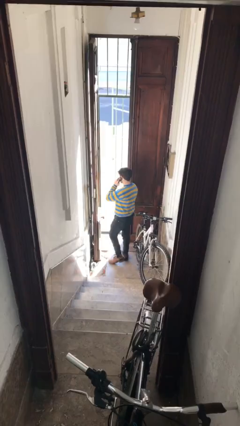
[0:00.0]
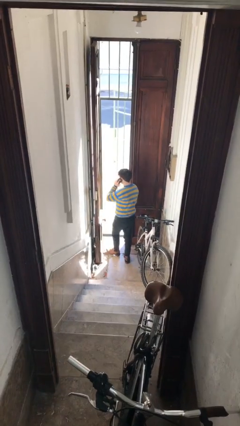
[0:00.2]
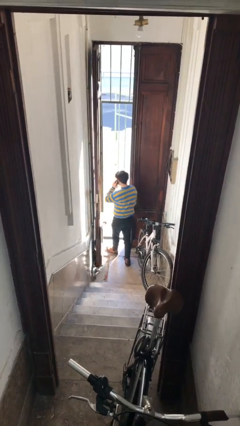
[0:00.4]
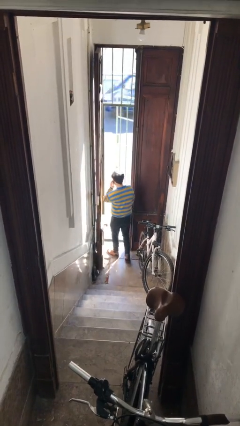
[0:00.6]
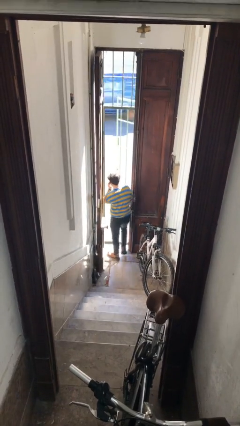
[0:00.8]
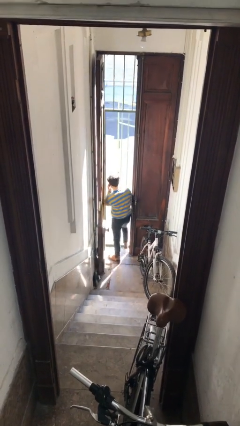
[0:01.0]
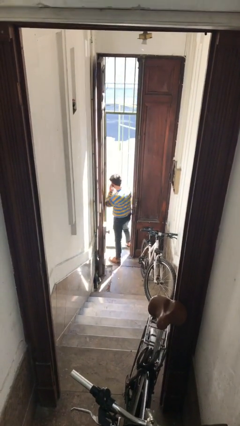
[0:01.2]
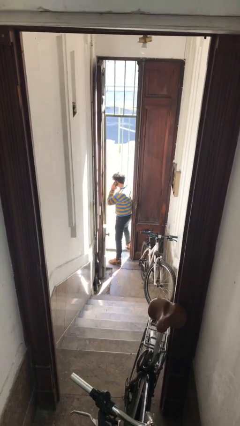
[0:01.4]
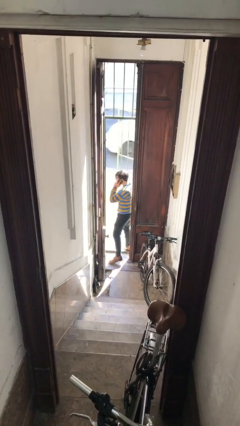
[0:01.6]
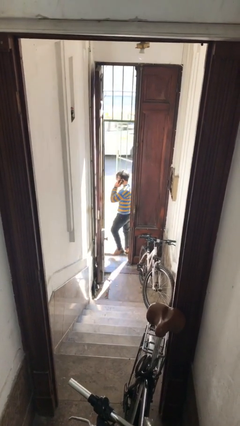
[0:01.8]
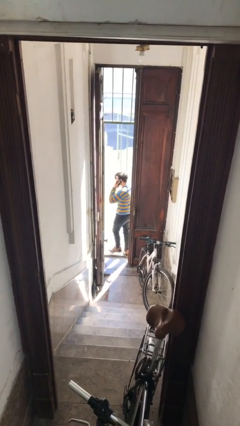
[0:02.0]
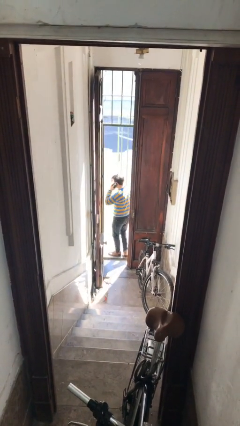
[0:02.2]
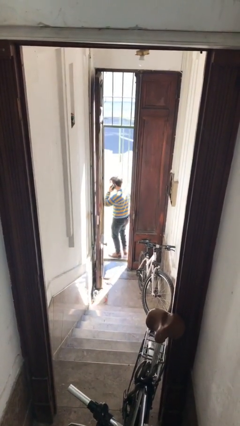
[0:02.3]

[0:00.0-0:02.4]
person exits scene through structure

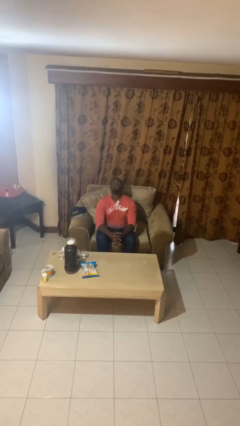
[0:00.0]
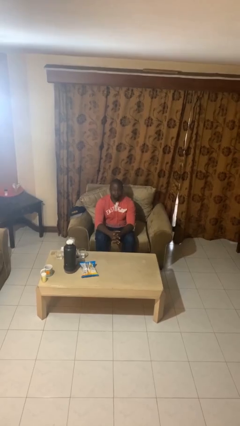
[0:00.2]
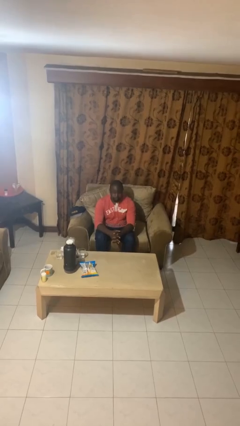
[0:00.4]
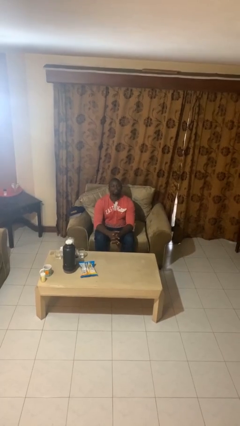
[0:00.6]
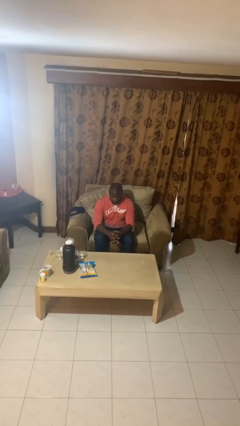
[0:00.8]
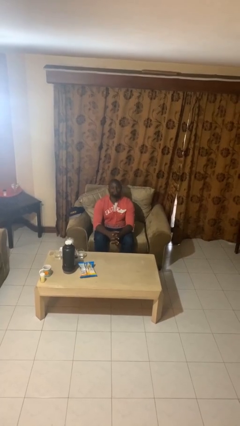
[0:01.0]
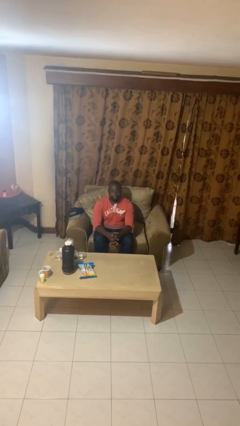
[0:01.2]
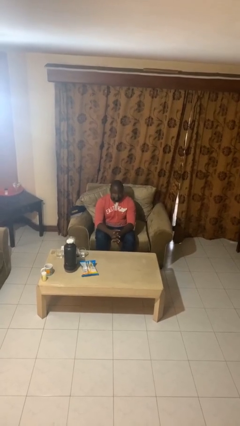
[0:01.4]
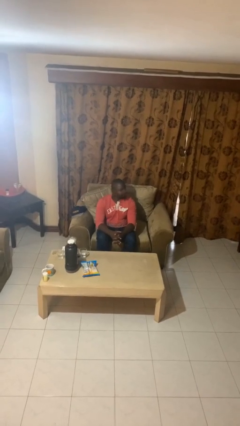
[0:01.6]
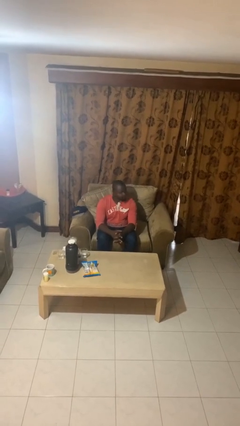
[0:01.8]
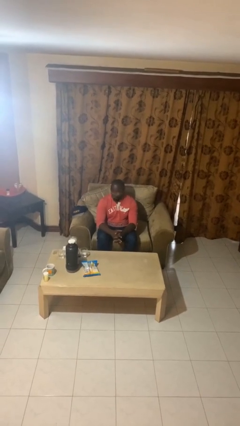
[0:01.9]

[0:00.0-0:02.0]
person nods head

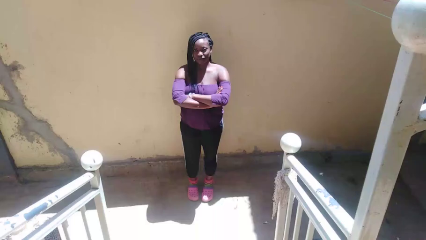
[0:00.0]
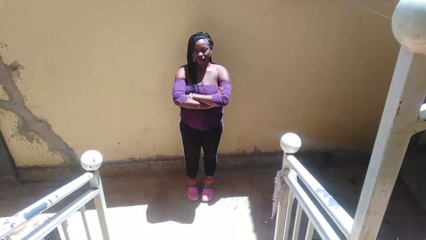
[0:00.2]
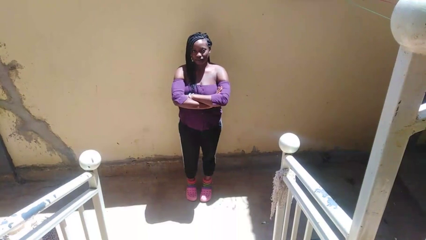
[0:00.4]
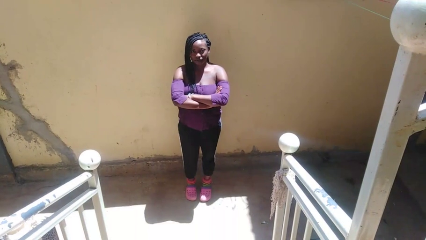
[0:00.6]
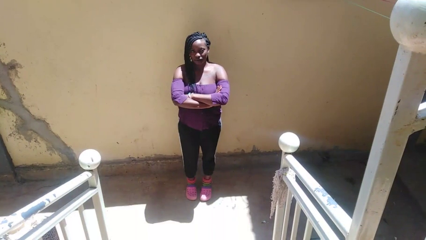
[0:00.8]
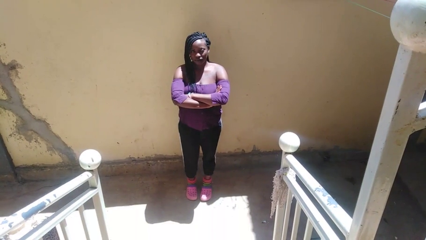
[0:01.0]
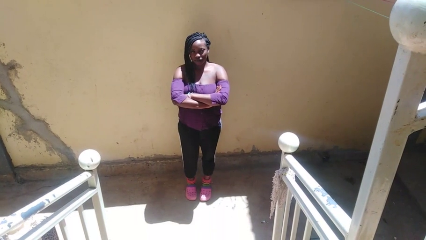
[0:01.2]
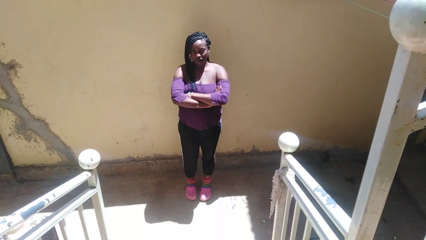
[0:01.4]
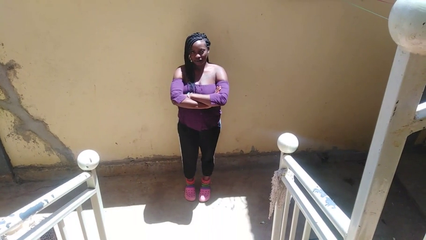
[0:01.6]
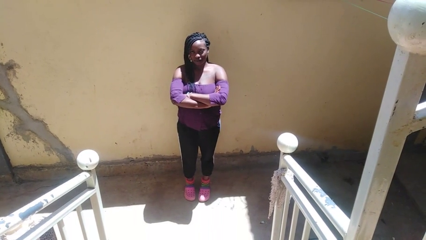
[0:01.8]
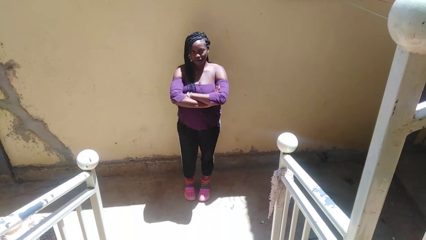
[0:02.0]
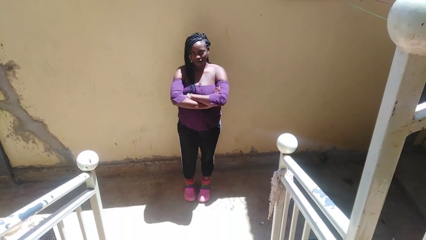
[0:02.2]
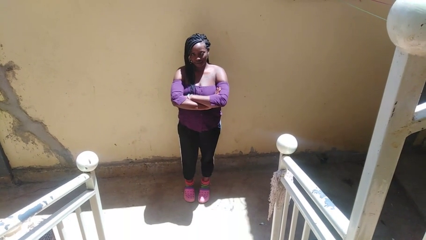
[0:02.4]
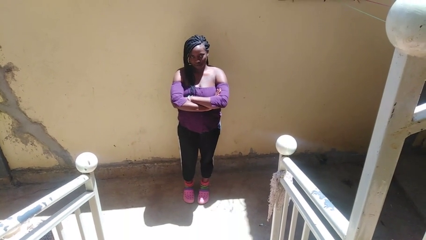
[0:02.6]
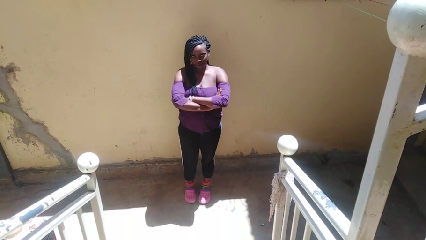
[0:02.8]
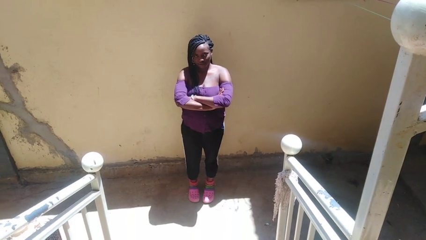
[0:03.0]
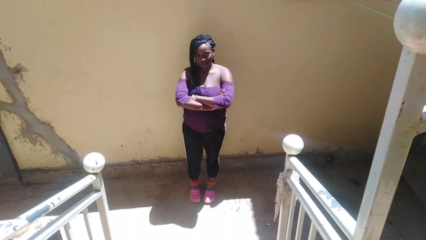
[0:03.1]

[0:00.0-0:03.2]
person crosses arms

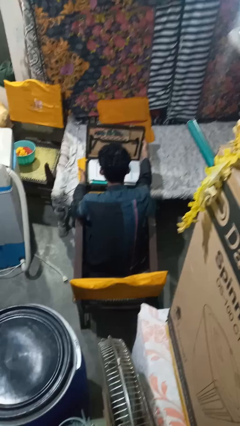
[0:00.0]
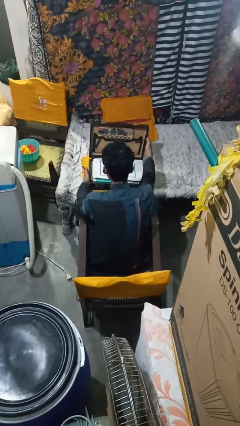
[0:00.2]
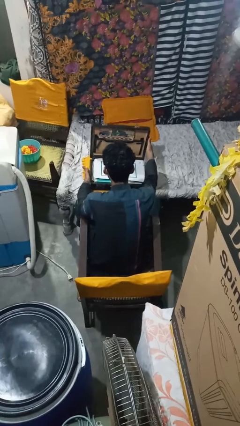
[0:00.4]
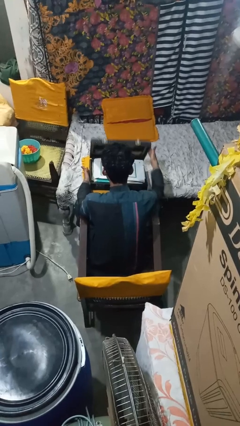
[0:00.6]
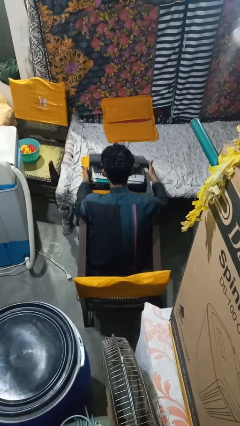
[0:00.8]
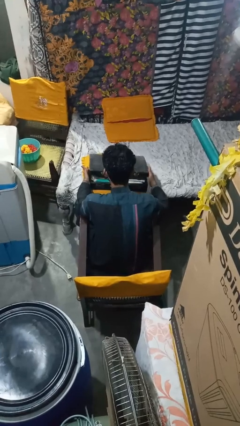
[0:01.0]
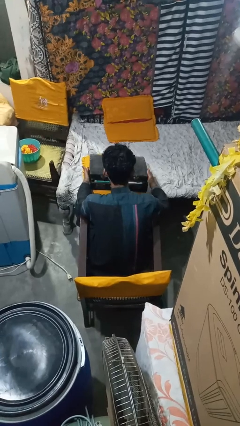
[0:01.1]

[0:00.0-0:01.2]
person closes suitcase

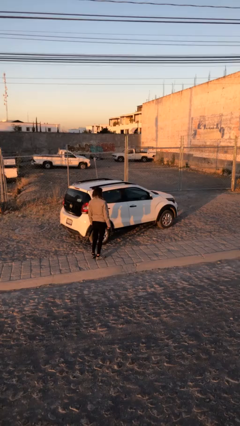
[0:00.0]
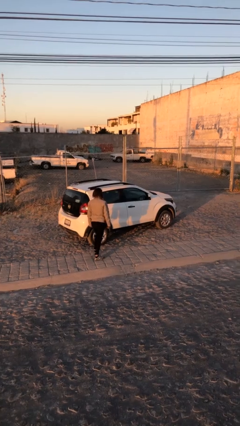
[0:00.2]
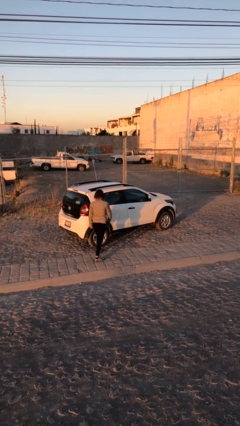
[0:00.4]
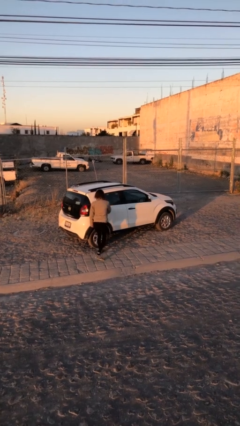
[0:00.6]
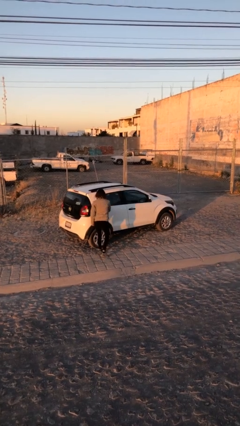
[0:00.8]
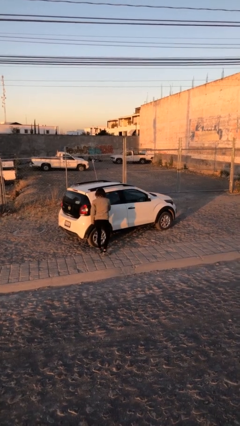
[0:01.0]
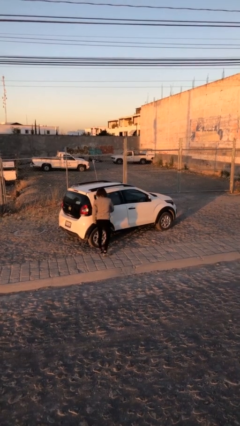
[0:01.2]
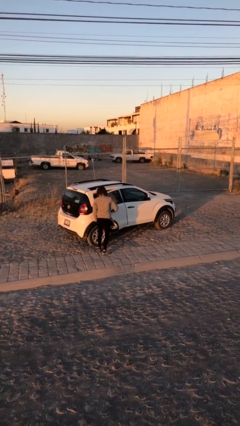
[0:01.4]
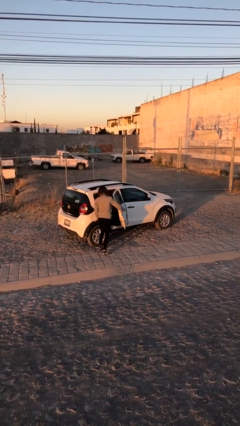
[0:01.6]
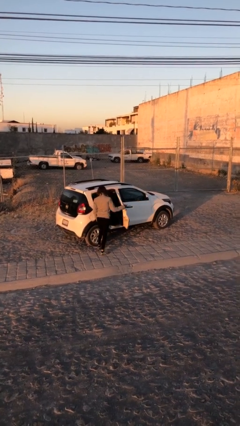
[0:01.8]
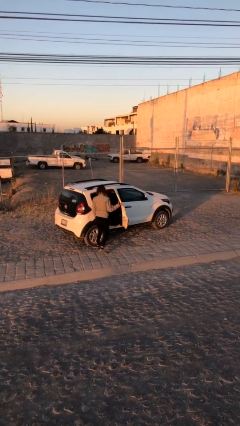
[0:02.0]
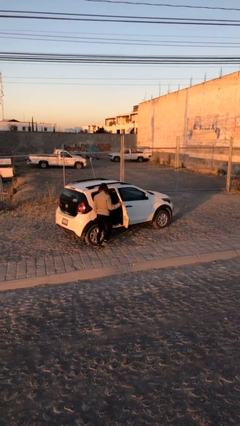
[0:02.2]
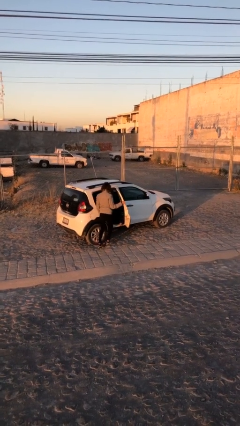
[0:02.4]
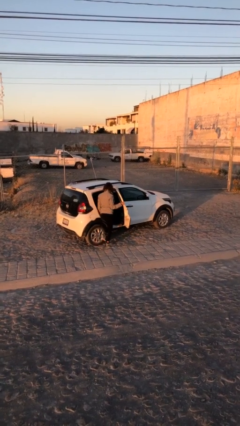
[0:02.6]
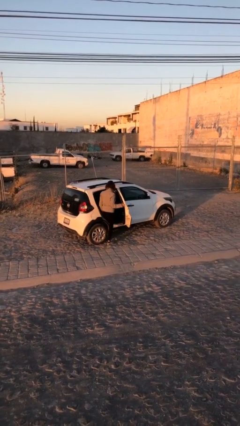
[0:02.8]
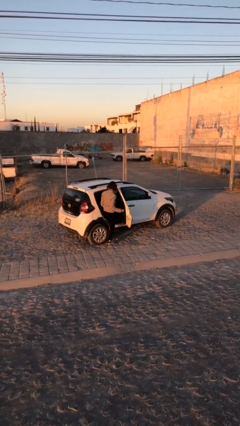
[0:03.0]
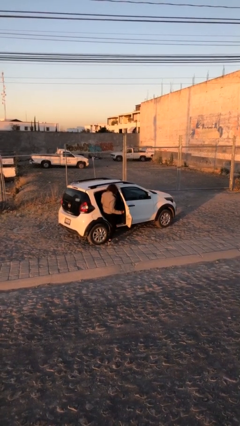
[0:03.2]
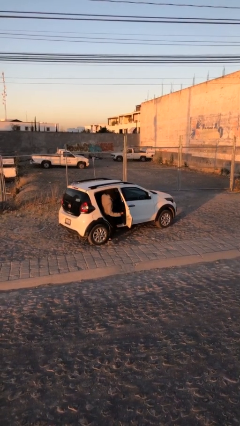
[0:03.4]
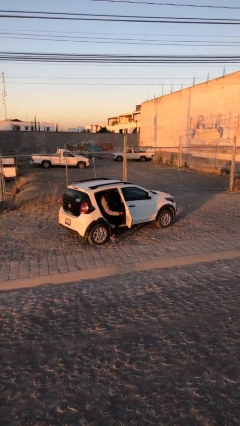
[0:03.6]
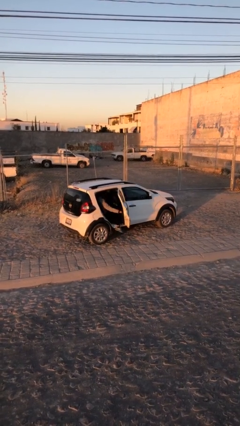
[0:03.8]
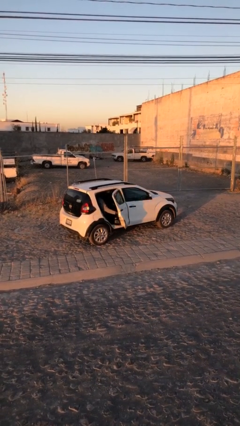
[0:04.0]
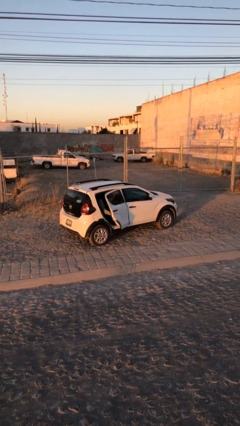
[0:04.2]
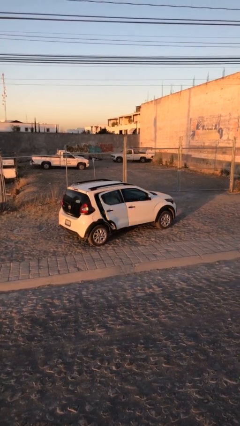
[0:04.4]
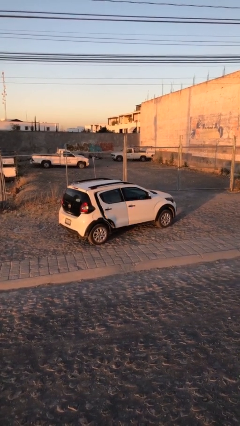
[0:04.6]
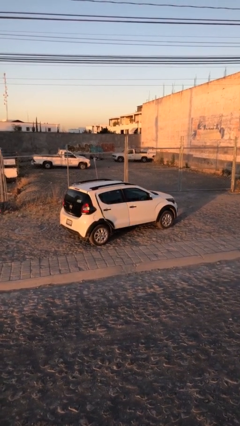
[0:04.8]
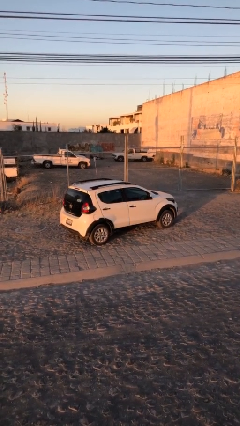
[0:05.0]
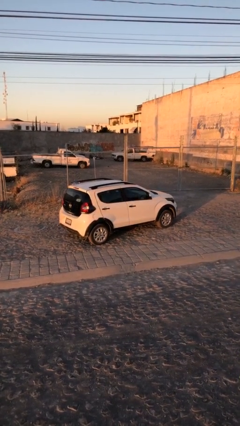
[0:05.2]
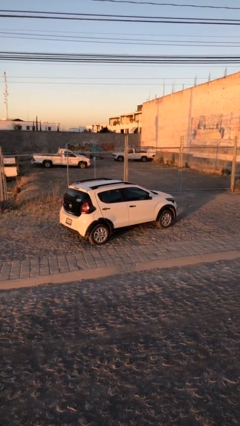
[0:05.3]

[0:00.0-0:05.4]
car picks up person

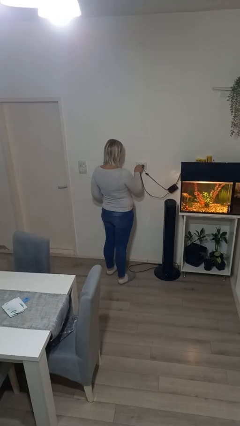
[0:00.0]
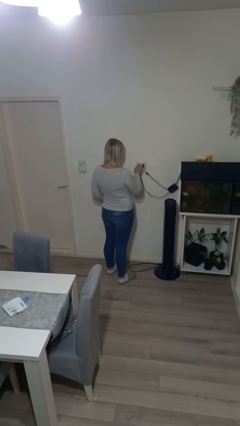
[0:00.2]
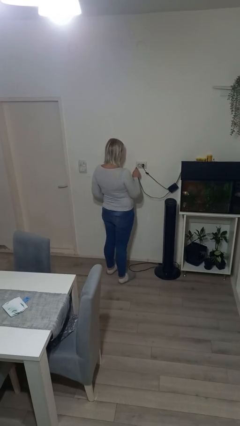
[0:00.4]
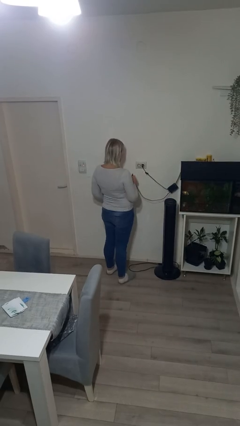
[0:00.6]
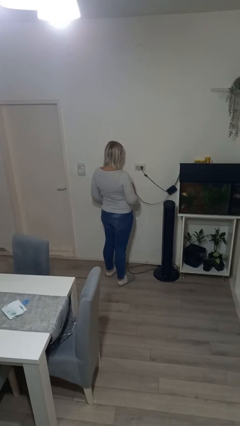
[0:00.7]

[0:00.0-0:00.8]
person unplugs from electrical socket

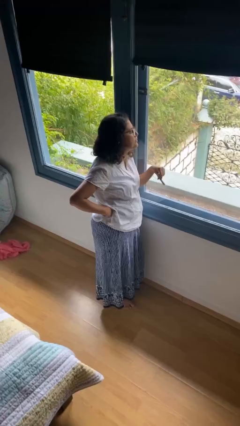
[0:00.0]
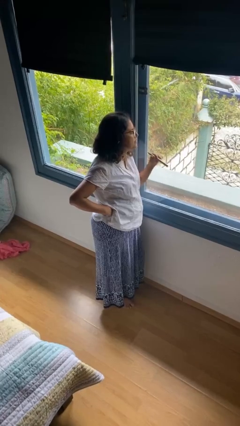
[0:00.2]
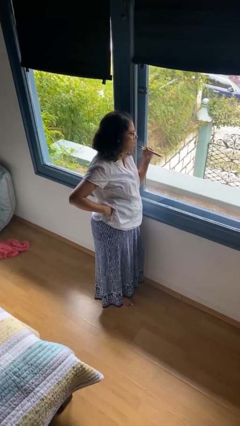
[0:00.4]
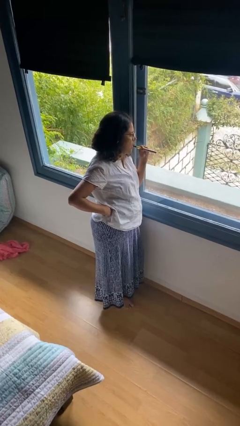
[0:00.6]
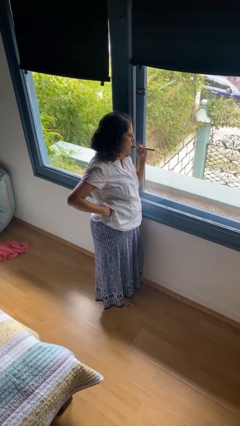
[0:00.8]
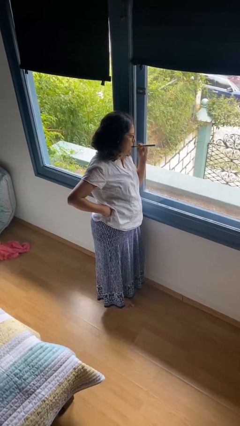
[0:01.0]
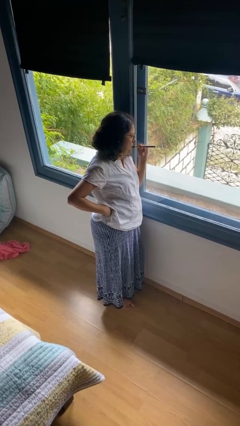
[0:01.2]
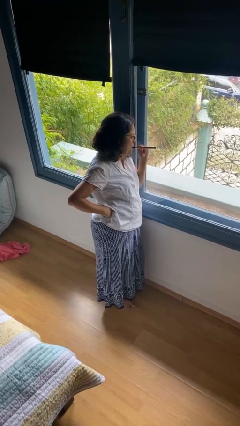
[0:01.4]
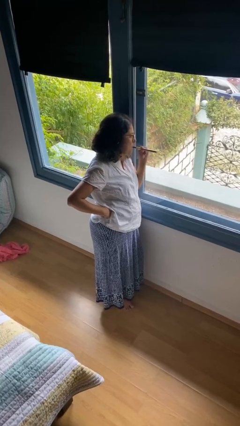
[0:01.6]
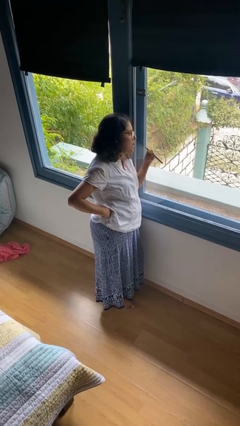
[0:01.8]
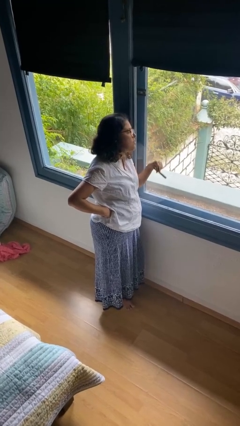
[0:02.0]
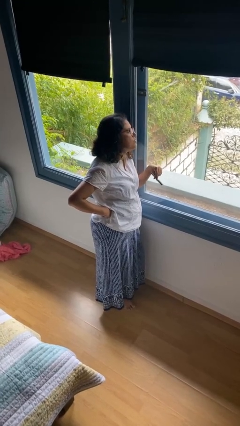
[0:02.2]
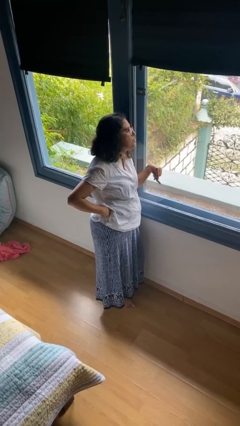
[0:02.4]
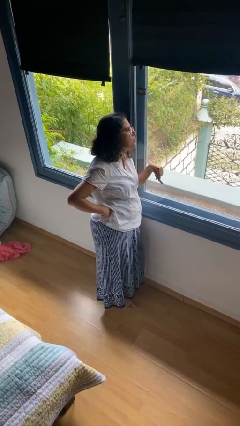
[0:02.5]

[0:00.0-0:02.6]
person vapes
